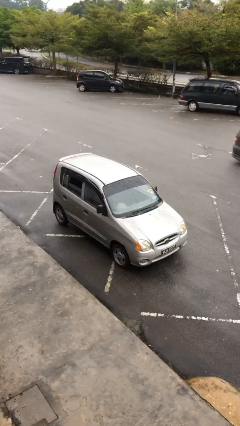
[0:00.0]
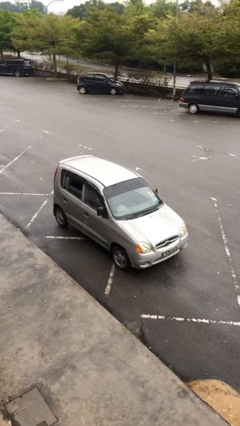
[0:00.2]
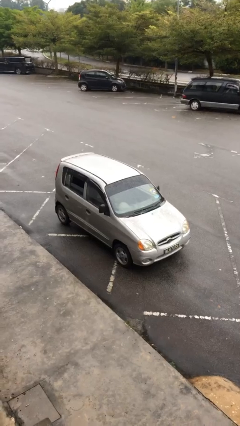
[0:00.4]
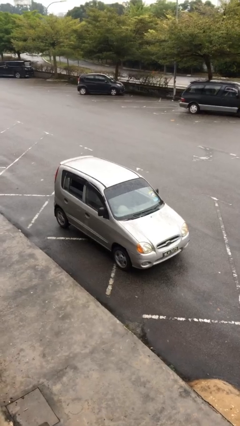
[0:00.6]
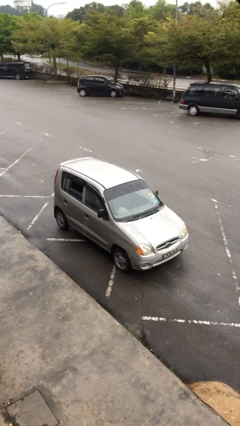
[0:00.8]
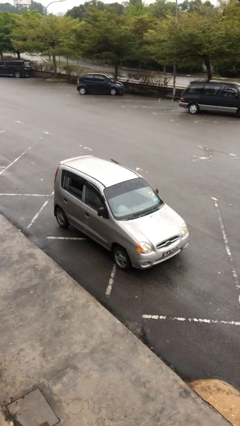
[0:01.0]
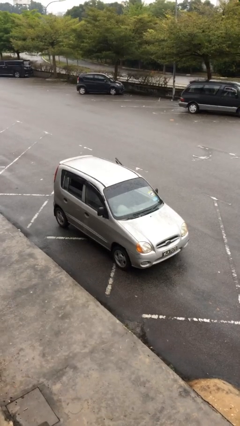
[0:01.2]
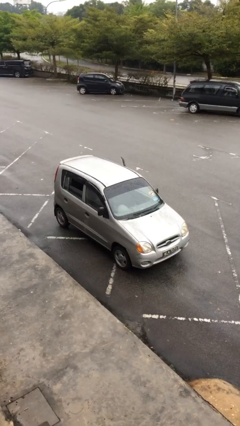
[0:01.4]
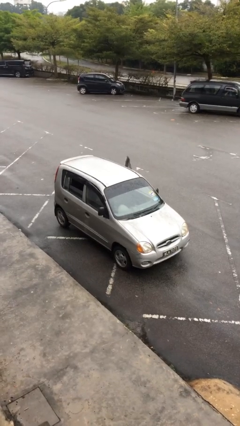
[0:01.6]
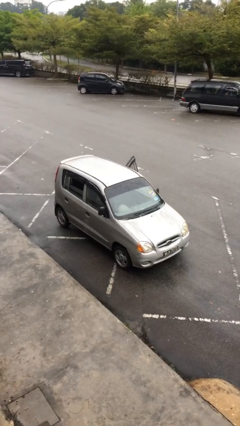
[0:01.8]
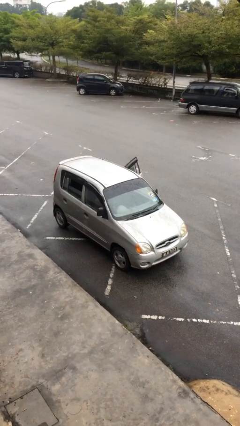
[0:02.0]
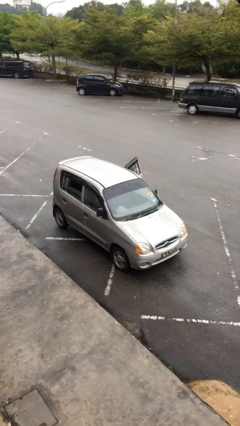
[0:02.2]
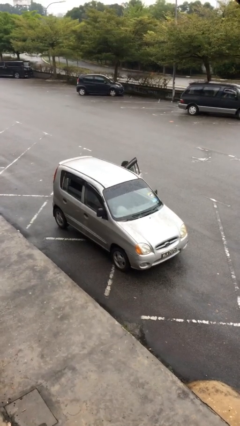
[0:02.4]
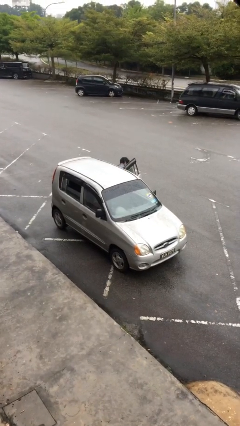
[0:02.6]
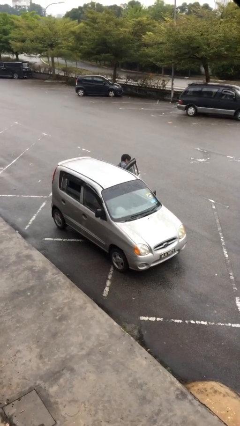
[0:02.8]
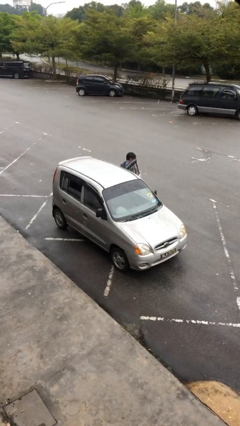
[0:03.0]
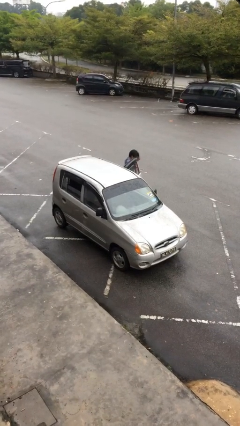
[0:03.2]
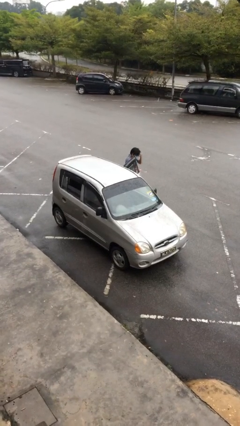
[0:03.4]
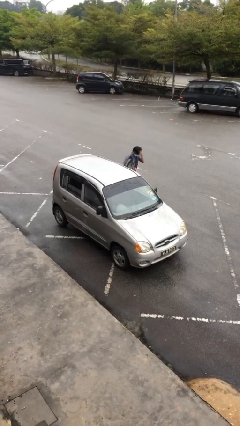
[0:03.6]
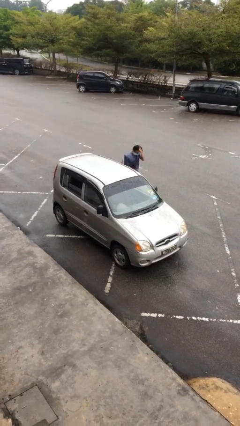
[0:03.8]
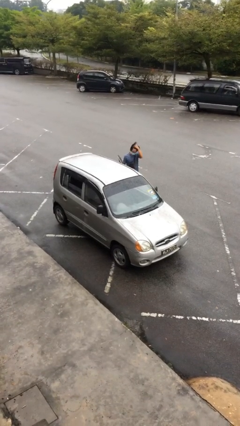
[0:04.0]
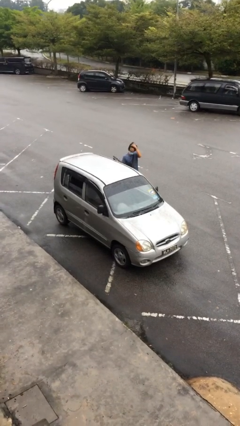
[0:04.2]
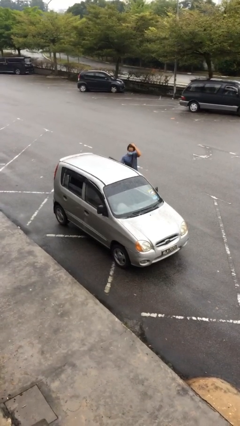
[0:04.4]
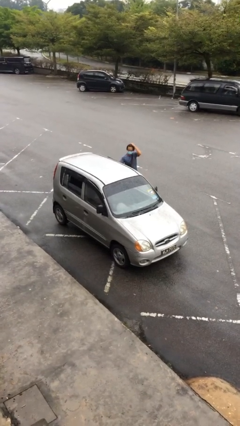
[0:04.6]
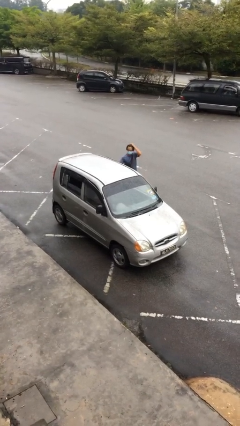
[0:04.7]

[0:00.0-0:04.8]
car drops off person

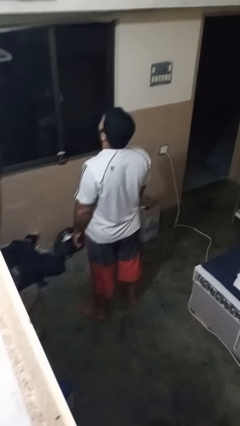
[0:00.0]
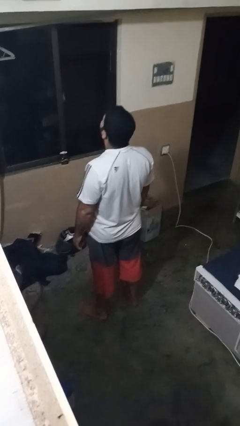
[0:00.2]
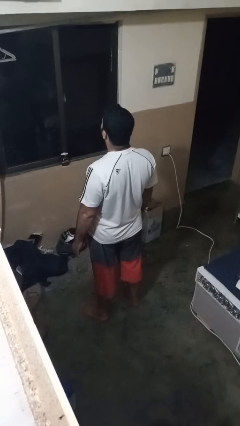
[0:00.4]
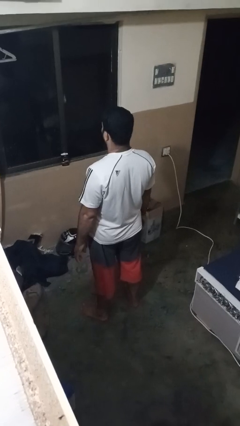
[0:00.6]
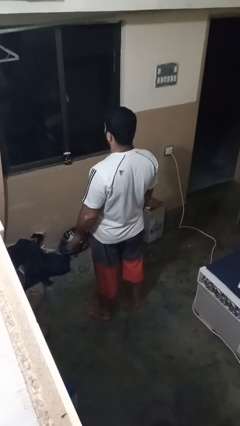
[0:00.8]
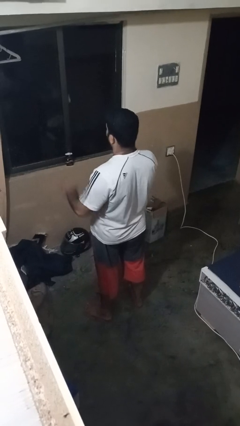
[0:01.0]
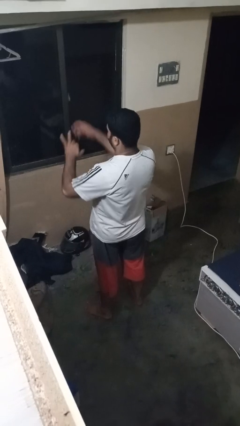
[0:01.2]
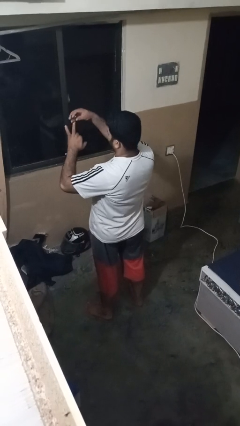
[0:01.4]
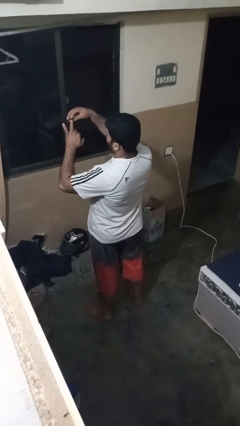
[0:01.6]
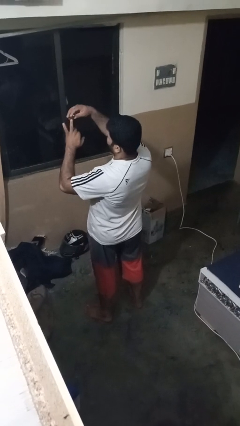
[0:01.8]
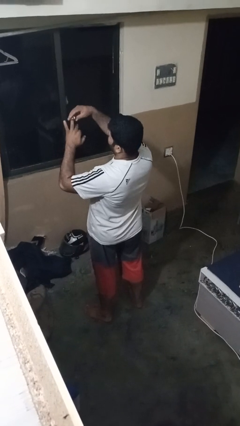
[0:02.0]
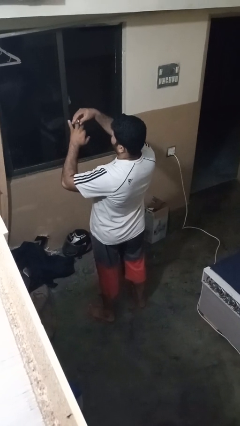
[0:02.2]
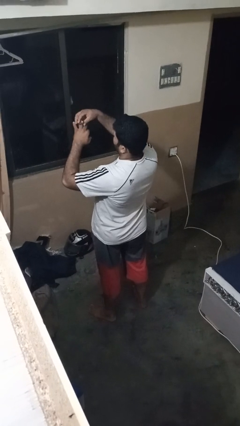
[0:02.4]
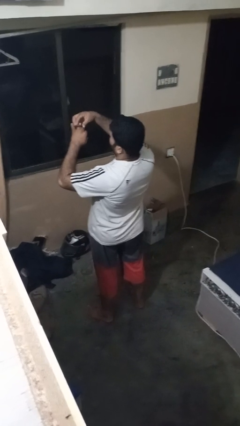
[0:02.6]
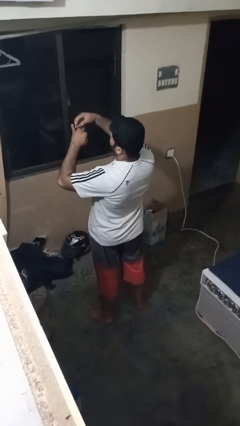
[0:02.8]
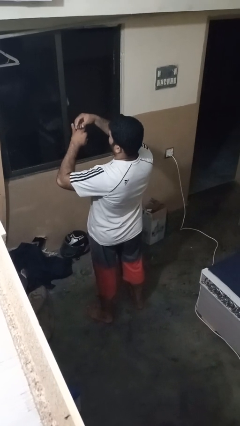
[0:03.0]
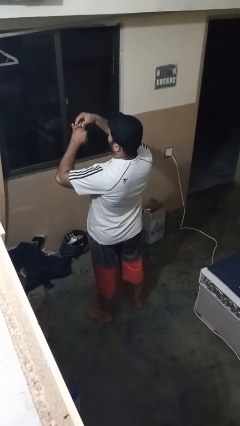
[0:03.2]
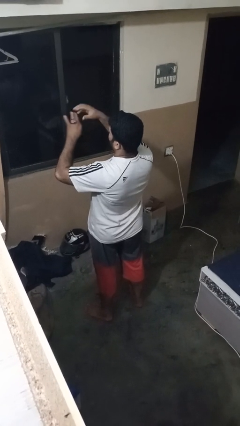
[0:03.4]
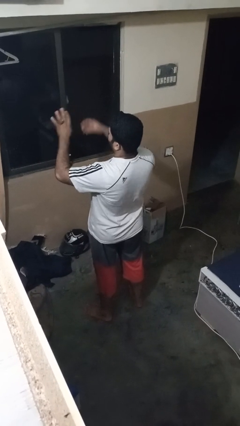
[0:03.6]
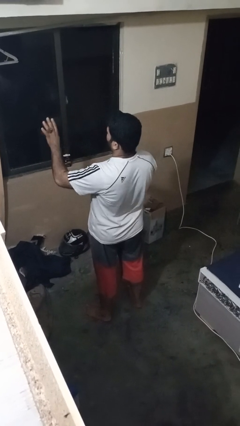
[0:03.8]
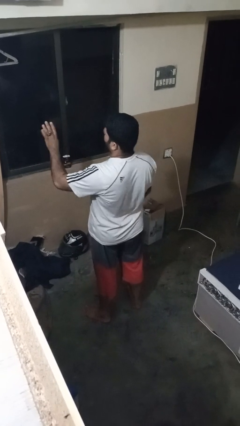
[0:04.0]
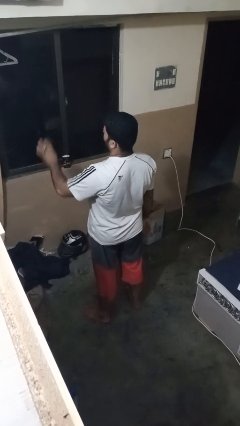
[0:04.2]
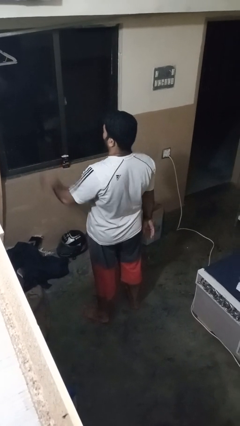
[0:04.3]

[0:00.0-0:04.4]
person puts on ring

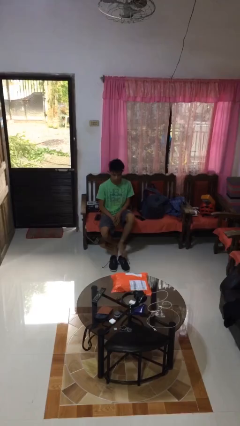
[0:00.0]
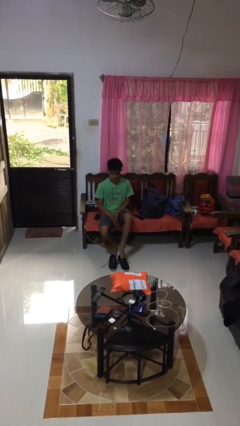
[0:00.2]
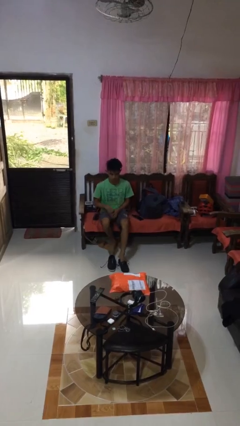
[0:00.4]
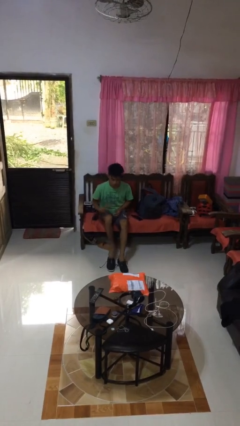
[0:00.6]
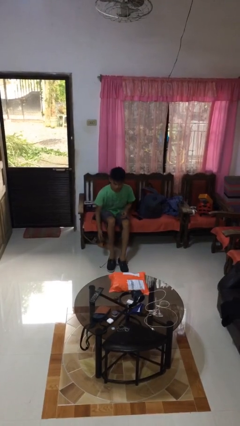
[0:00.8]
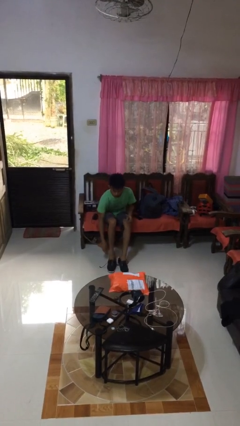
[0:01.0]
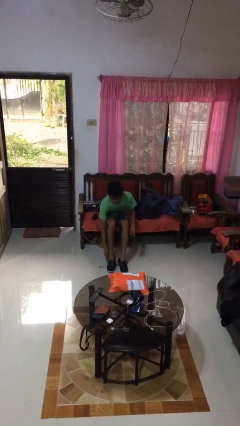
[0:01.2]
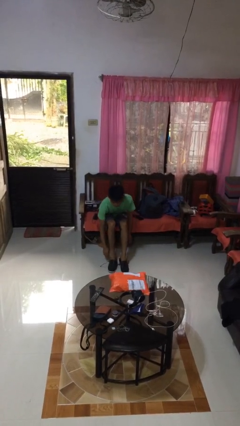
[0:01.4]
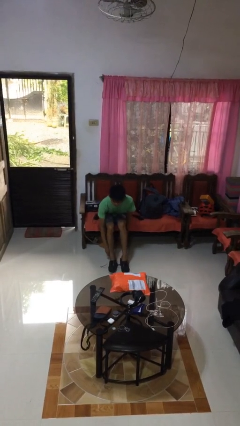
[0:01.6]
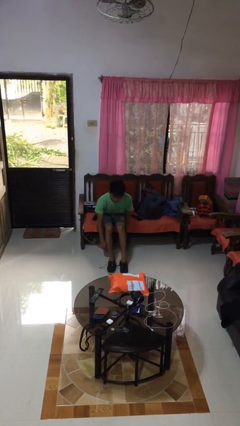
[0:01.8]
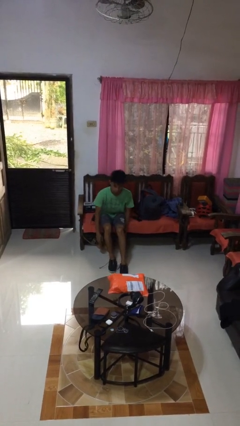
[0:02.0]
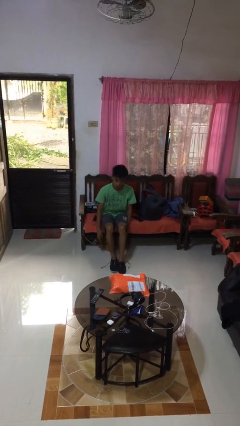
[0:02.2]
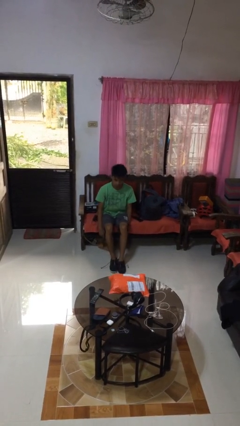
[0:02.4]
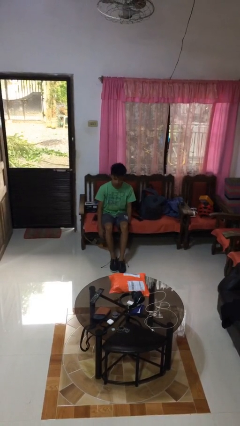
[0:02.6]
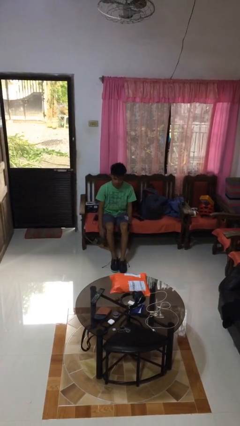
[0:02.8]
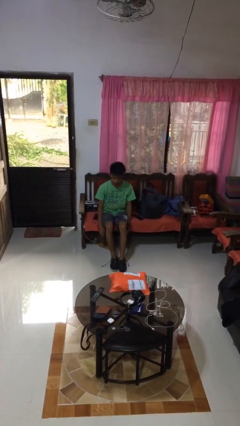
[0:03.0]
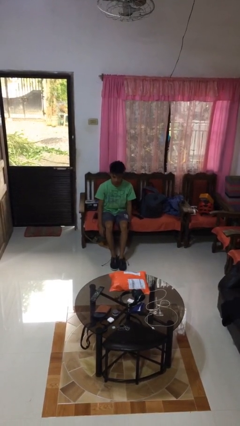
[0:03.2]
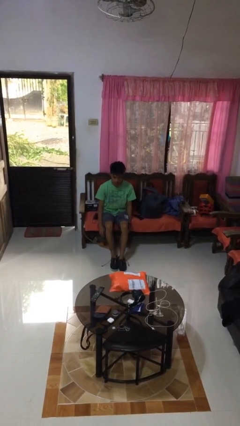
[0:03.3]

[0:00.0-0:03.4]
person puts on shoes

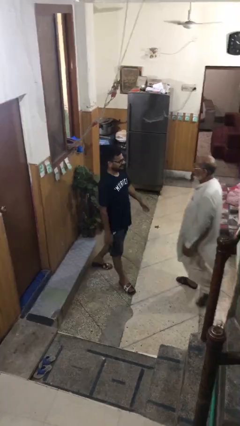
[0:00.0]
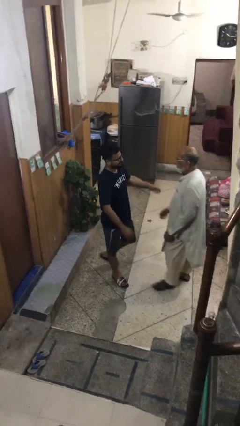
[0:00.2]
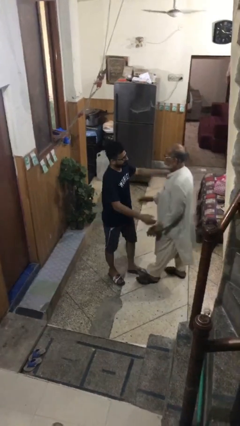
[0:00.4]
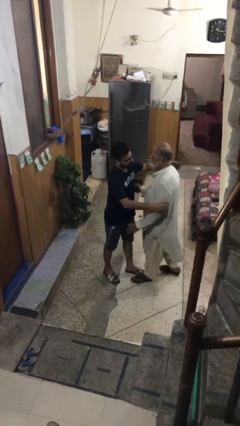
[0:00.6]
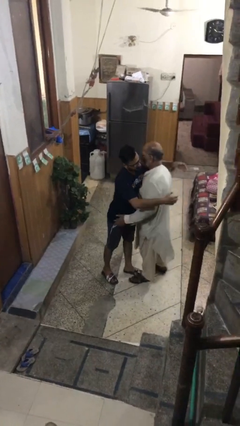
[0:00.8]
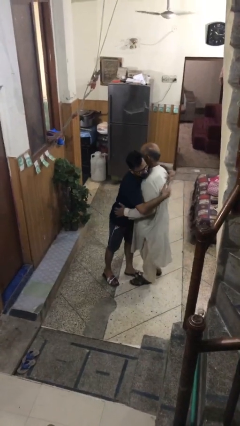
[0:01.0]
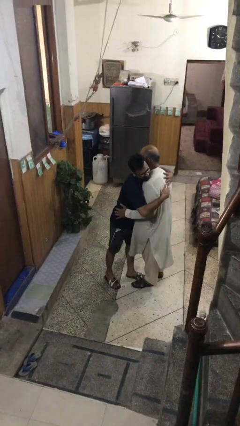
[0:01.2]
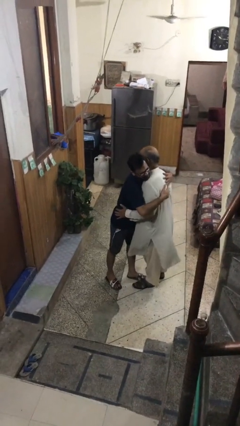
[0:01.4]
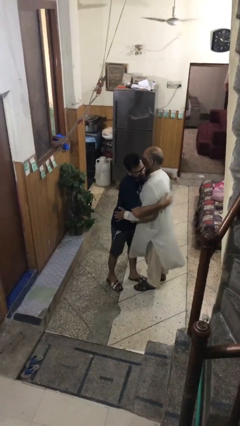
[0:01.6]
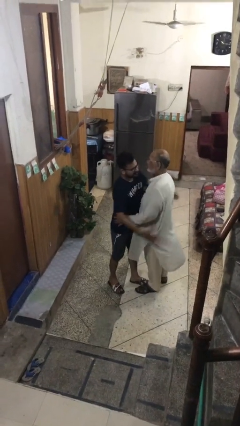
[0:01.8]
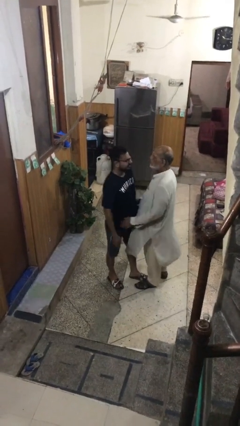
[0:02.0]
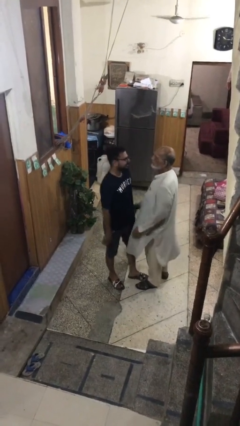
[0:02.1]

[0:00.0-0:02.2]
person embraces person

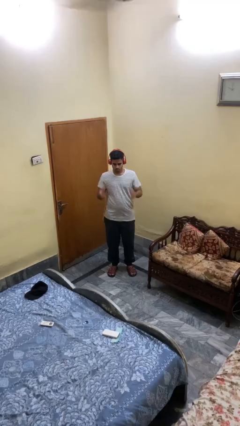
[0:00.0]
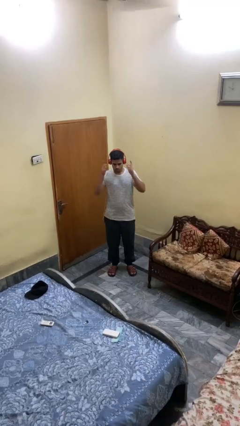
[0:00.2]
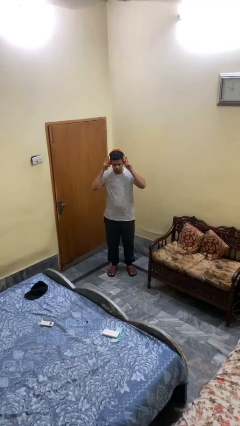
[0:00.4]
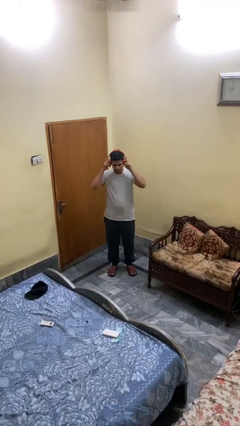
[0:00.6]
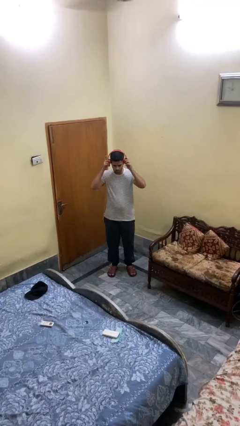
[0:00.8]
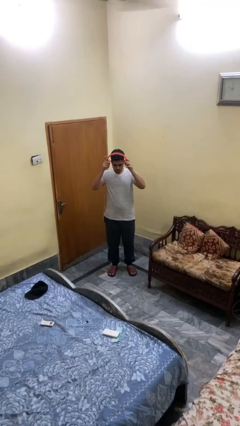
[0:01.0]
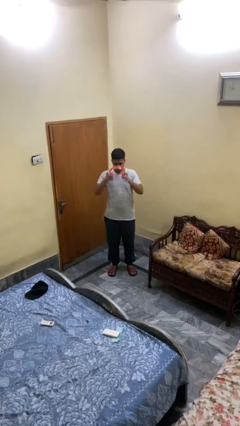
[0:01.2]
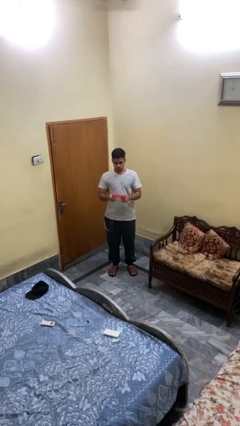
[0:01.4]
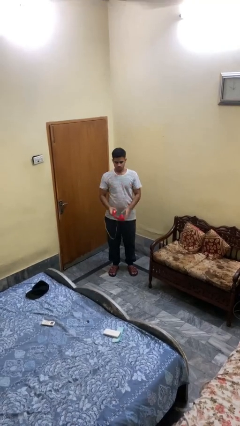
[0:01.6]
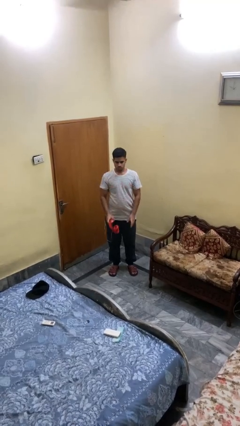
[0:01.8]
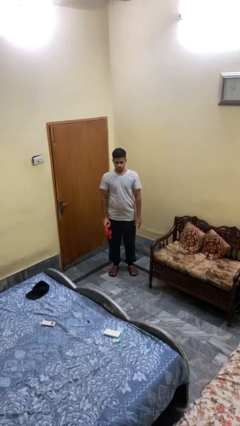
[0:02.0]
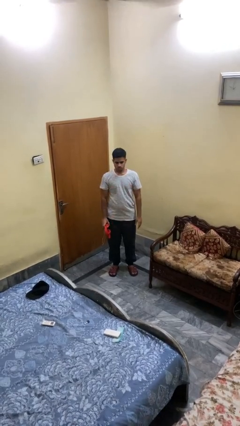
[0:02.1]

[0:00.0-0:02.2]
person takes off headphones

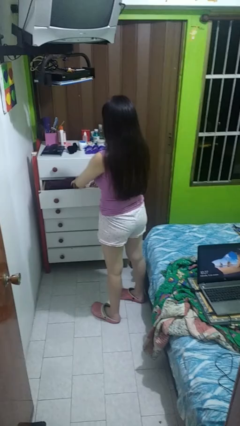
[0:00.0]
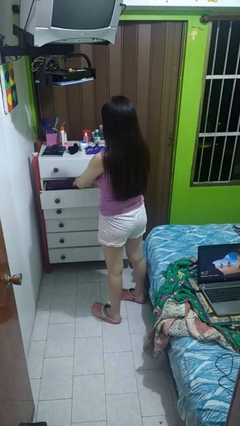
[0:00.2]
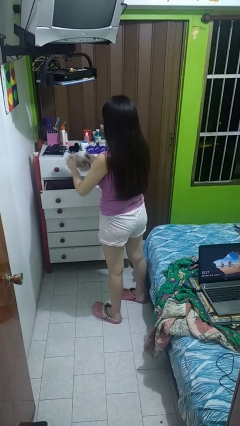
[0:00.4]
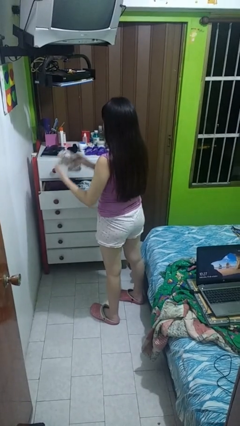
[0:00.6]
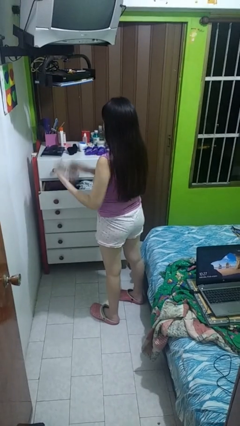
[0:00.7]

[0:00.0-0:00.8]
person takes clothes from dresser
